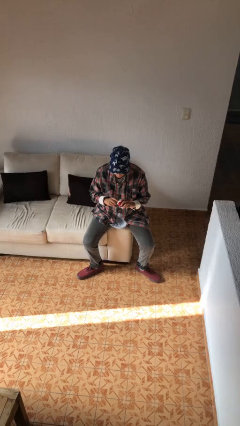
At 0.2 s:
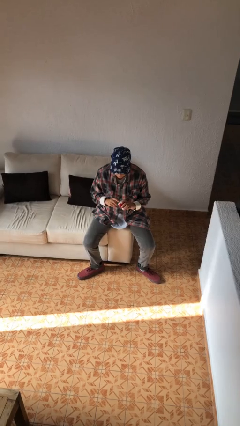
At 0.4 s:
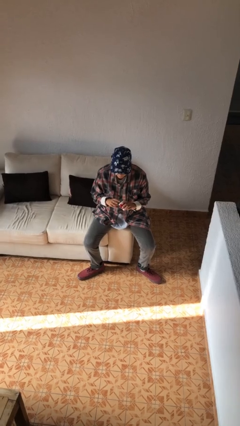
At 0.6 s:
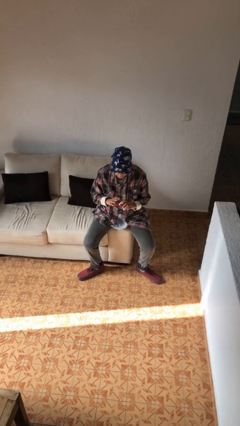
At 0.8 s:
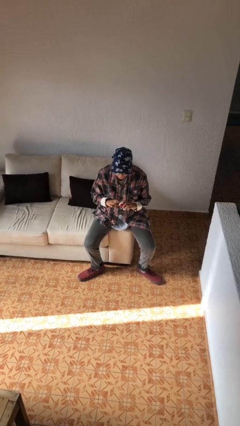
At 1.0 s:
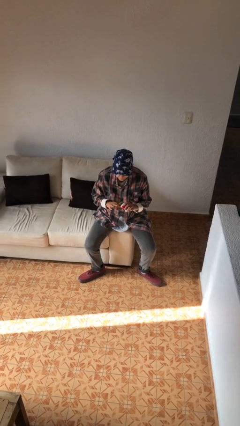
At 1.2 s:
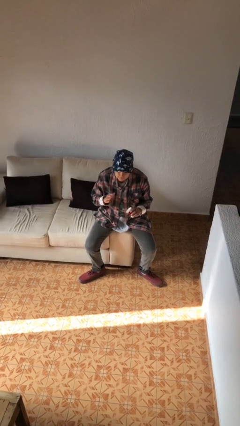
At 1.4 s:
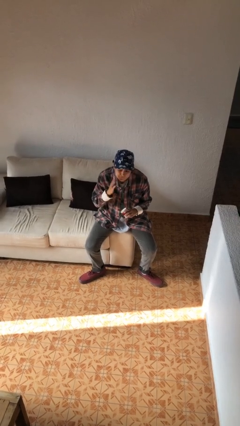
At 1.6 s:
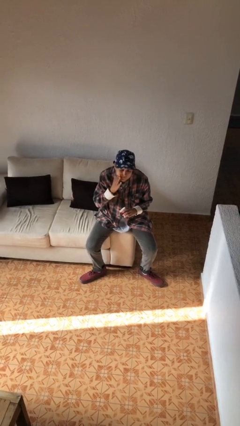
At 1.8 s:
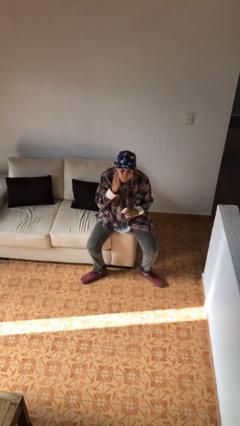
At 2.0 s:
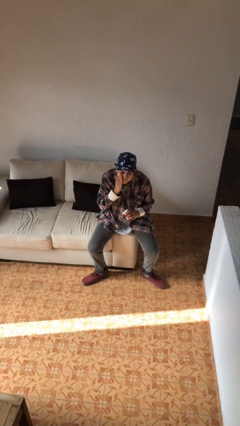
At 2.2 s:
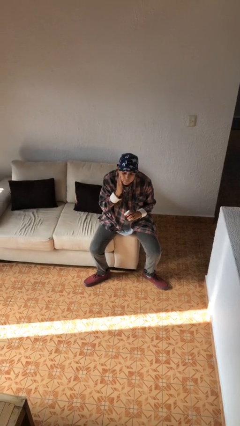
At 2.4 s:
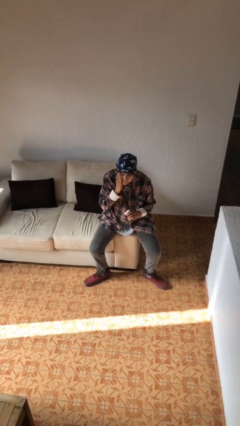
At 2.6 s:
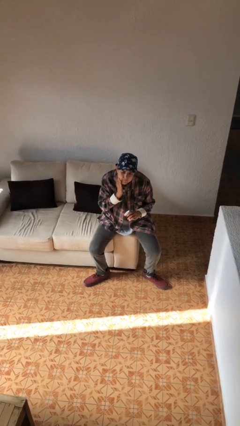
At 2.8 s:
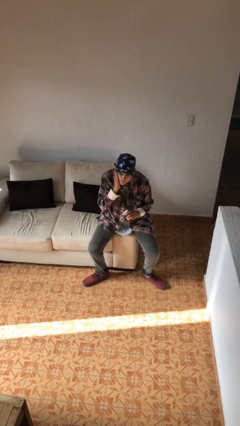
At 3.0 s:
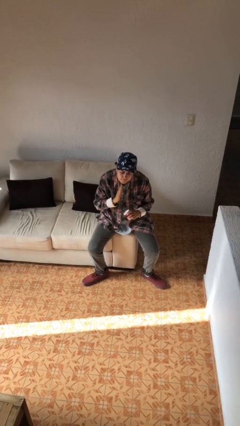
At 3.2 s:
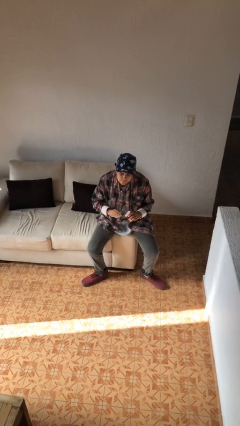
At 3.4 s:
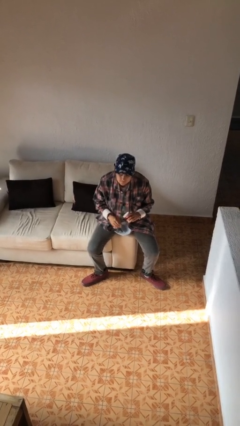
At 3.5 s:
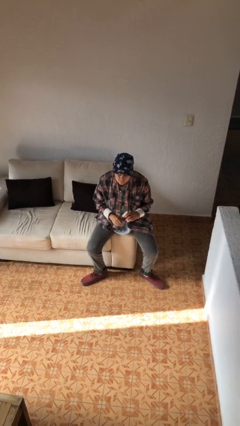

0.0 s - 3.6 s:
person applies facial moisturizer

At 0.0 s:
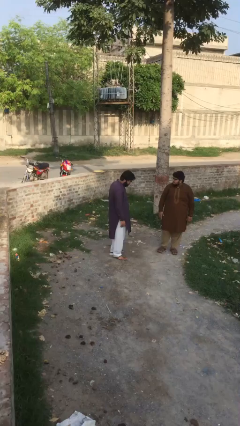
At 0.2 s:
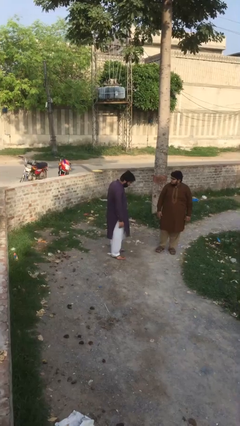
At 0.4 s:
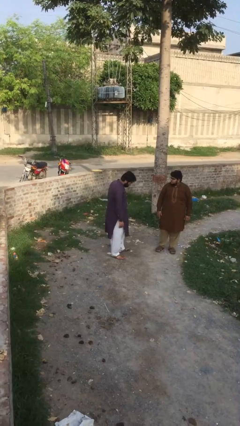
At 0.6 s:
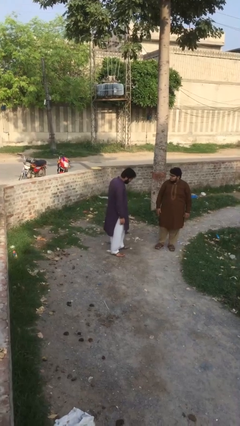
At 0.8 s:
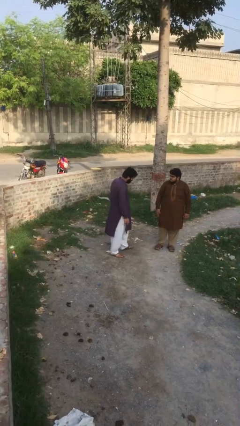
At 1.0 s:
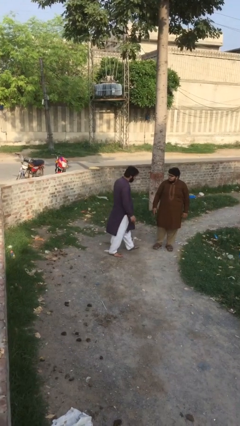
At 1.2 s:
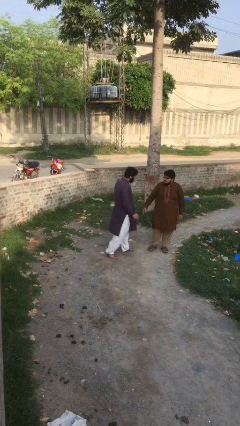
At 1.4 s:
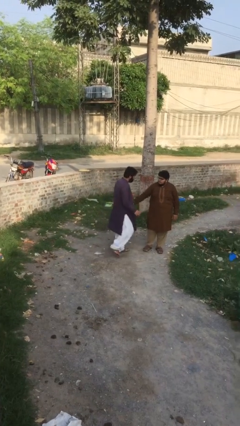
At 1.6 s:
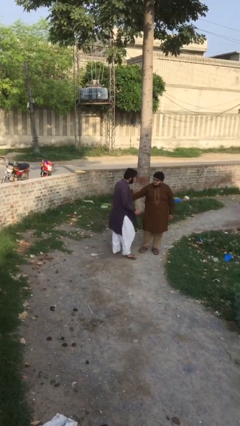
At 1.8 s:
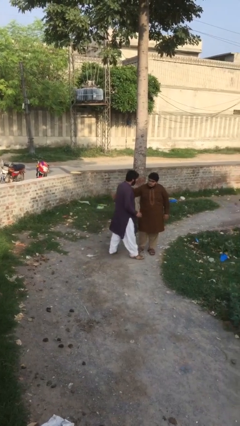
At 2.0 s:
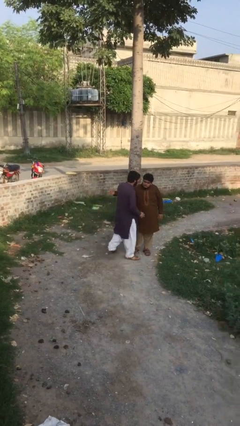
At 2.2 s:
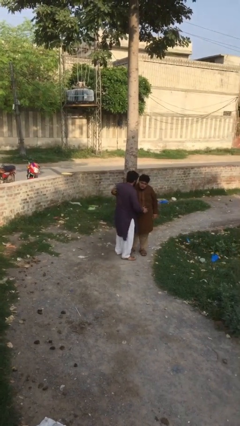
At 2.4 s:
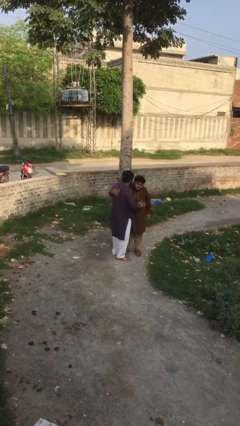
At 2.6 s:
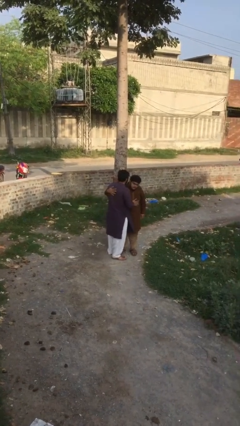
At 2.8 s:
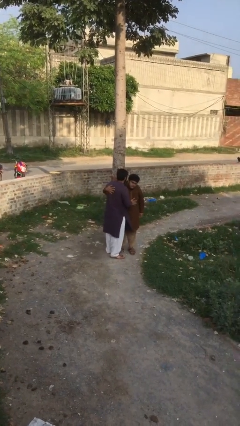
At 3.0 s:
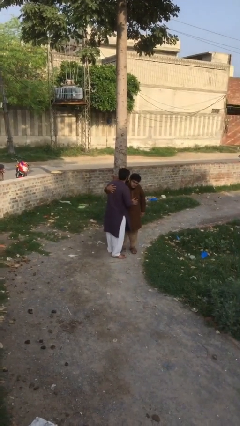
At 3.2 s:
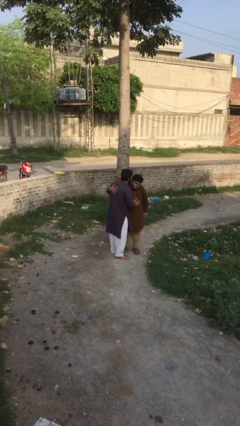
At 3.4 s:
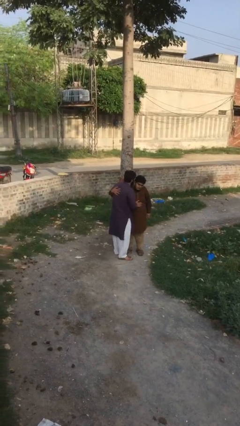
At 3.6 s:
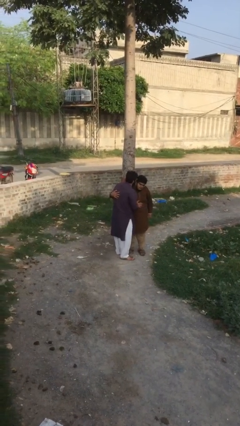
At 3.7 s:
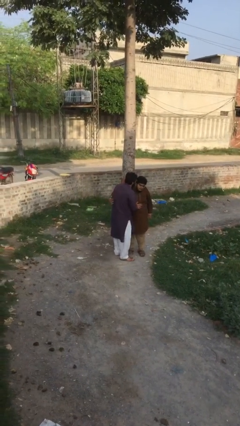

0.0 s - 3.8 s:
person embraces person

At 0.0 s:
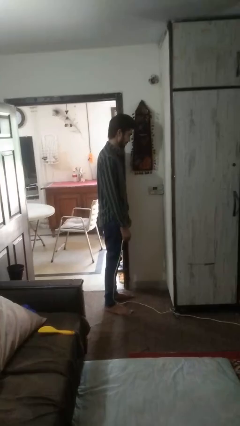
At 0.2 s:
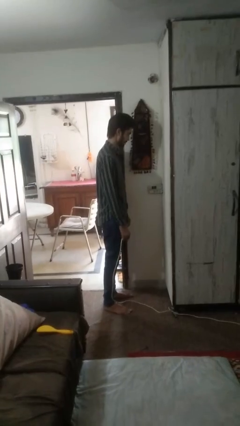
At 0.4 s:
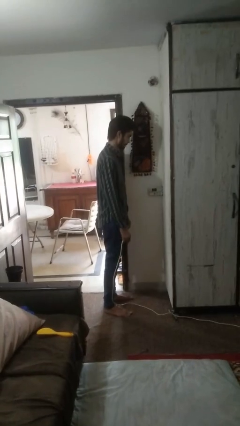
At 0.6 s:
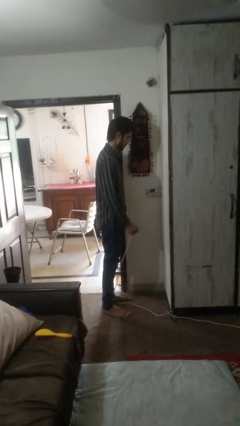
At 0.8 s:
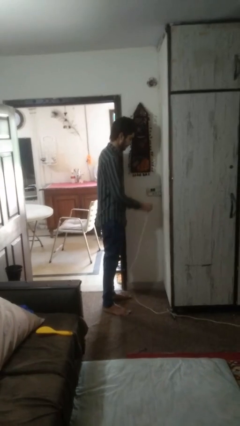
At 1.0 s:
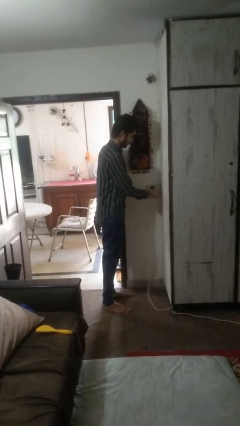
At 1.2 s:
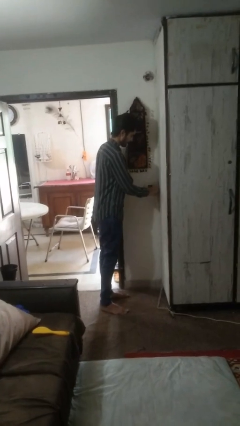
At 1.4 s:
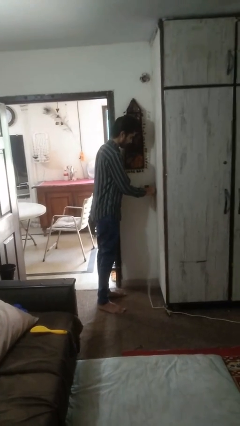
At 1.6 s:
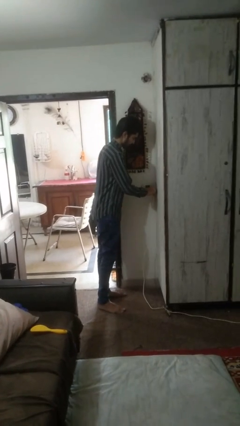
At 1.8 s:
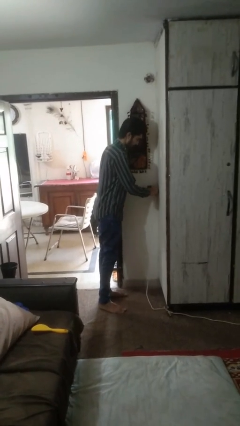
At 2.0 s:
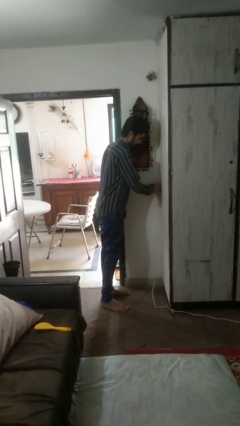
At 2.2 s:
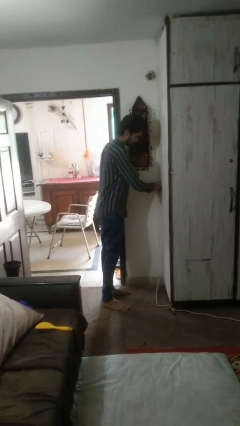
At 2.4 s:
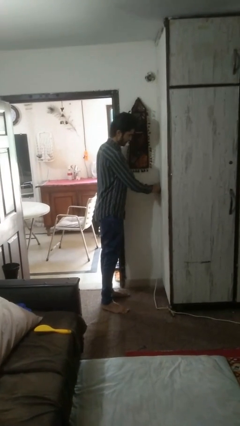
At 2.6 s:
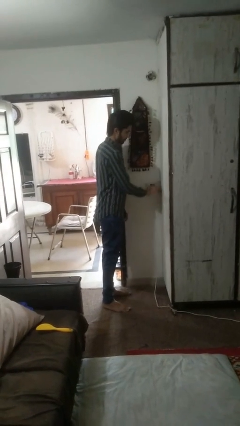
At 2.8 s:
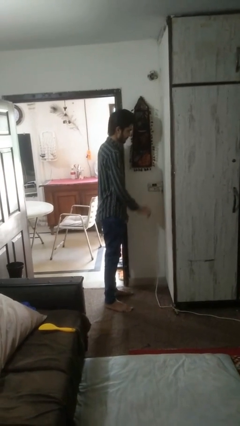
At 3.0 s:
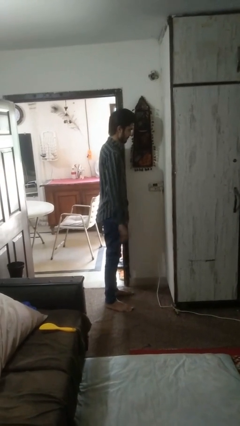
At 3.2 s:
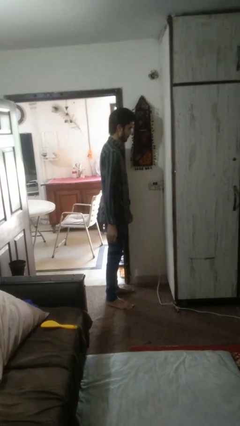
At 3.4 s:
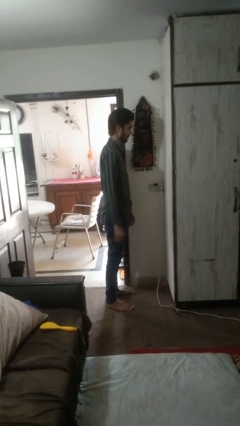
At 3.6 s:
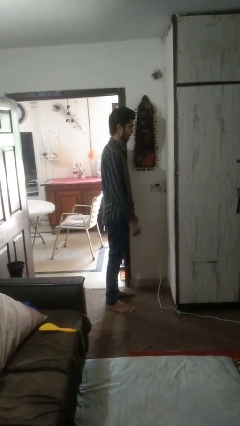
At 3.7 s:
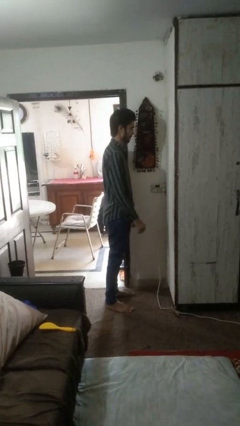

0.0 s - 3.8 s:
person plugs into electrical socket

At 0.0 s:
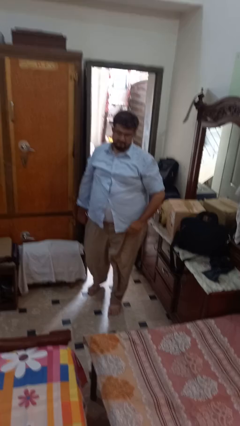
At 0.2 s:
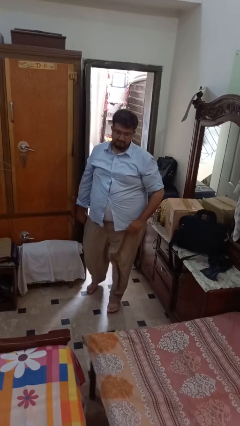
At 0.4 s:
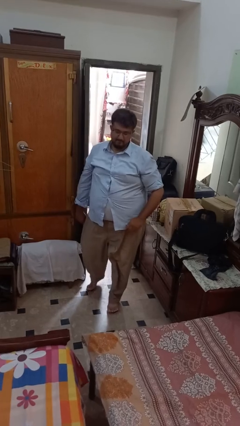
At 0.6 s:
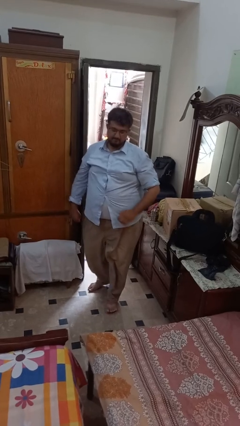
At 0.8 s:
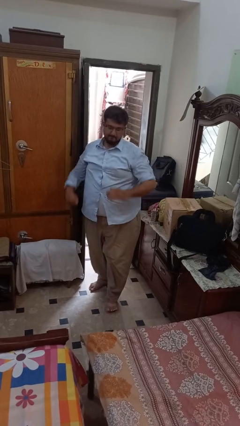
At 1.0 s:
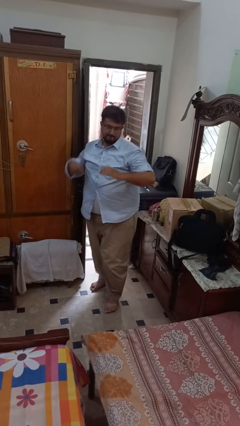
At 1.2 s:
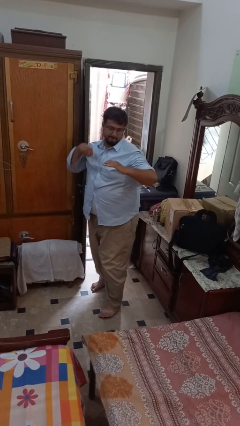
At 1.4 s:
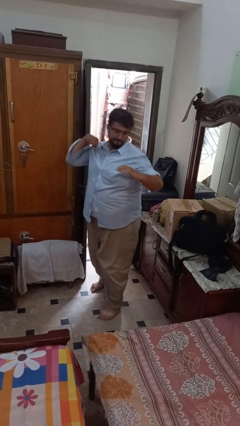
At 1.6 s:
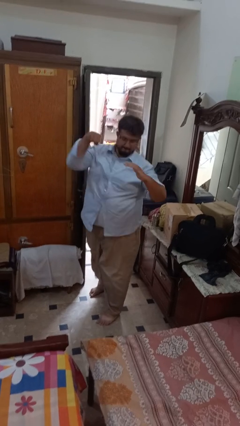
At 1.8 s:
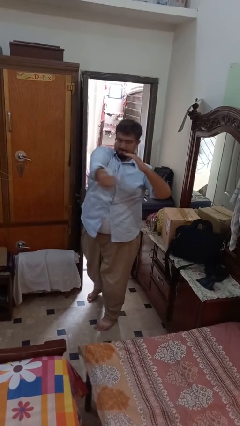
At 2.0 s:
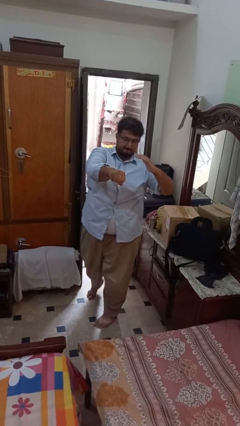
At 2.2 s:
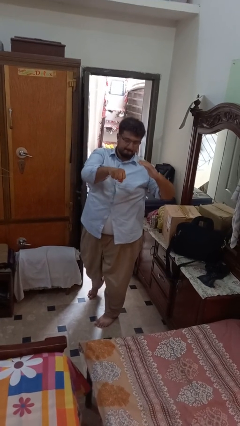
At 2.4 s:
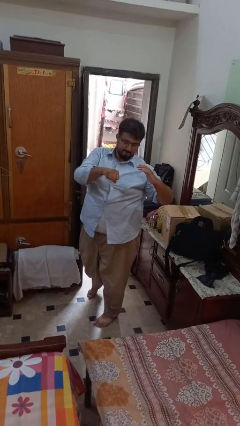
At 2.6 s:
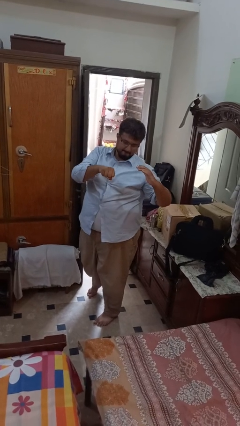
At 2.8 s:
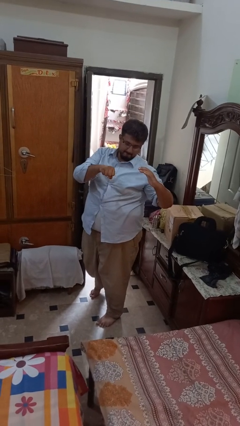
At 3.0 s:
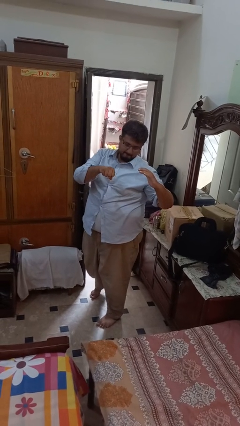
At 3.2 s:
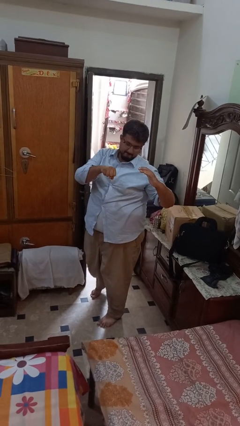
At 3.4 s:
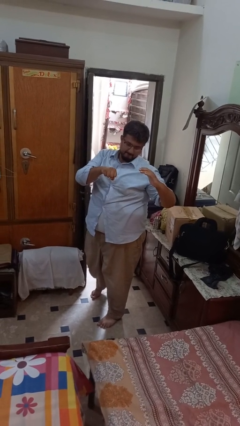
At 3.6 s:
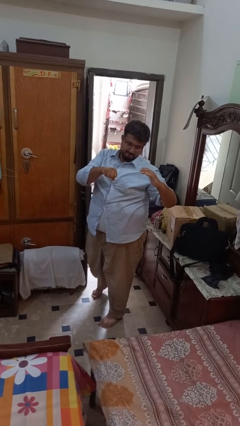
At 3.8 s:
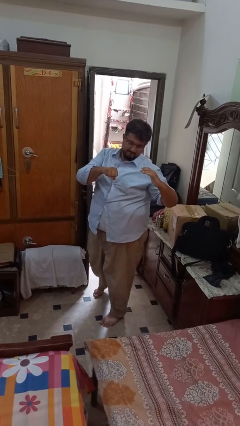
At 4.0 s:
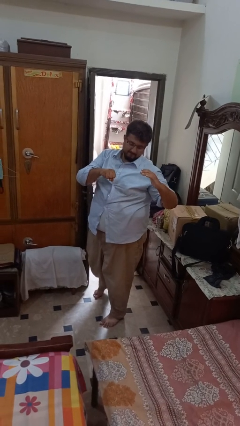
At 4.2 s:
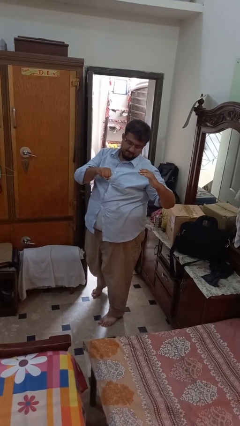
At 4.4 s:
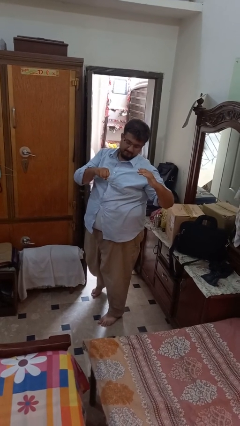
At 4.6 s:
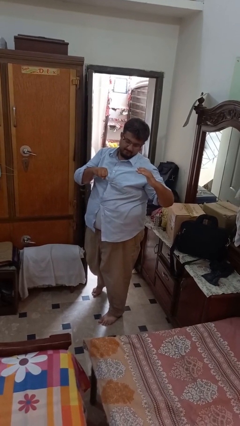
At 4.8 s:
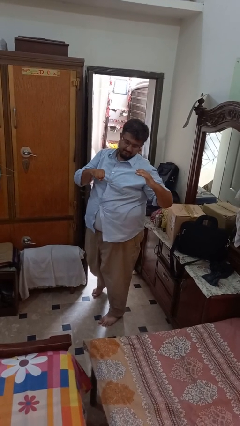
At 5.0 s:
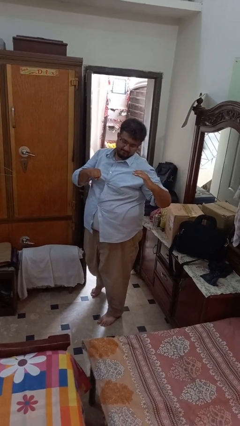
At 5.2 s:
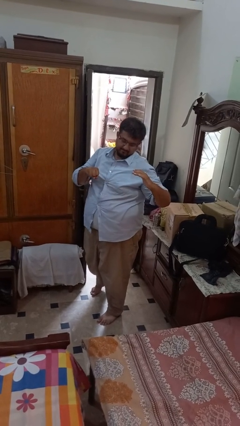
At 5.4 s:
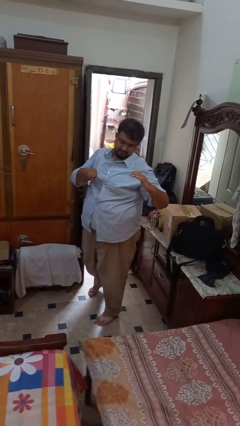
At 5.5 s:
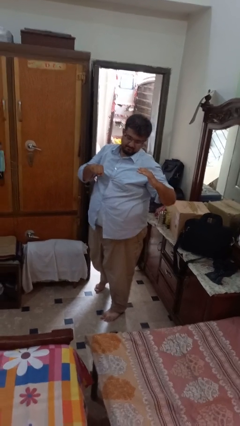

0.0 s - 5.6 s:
person karate chop

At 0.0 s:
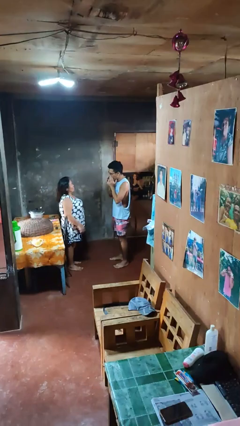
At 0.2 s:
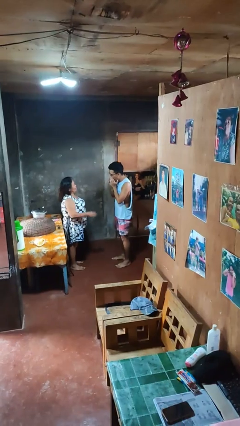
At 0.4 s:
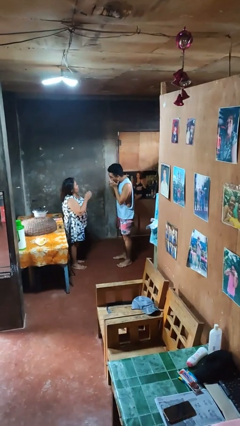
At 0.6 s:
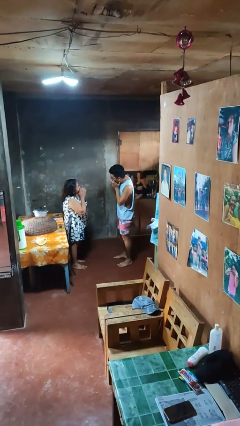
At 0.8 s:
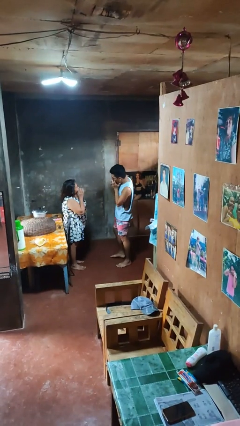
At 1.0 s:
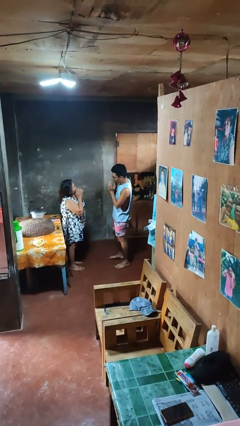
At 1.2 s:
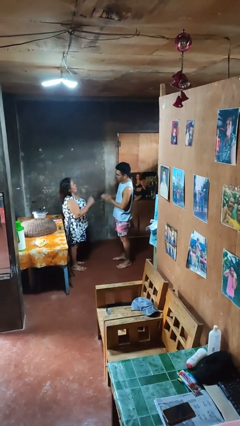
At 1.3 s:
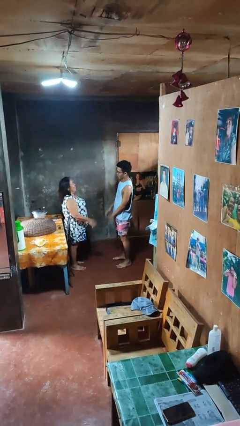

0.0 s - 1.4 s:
person laughs with person
